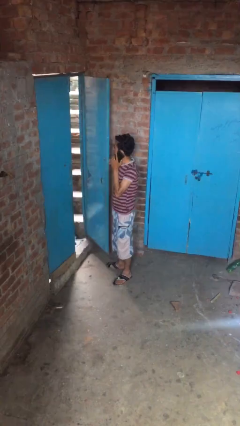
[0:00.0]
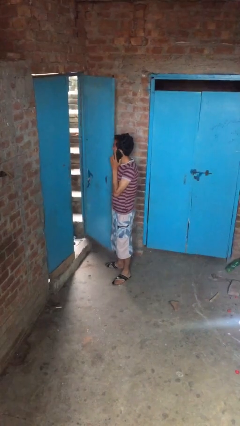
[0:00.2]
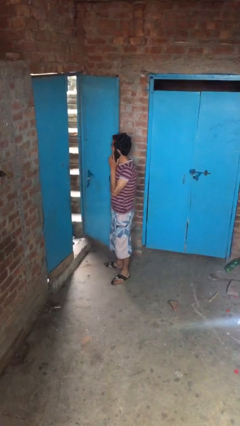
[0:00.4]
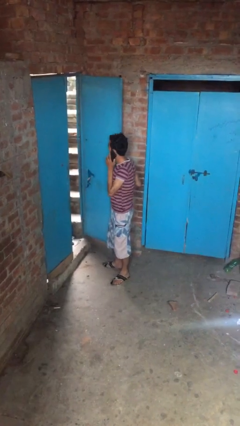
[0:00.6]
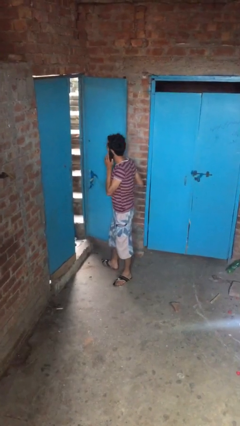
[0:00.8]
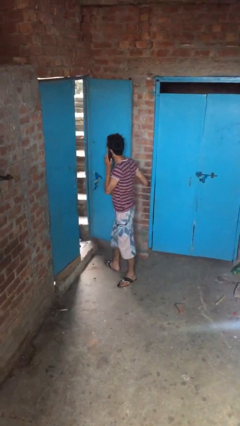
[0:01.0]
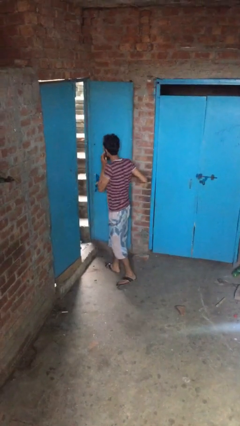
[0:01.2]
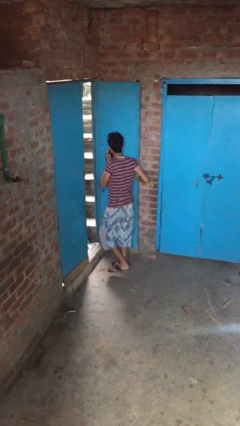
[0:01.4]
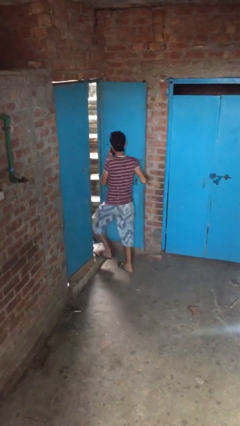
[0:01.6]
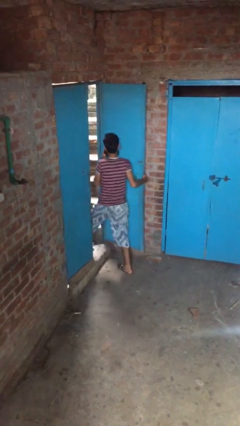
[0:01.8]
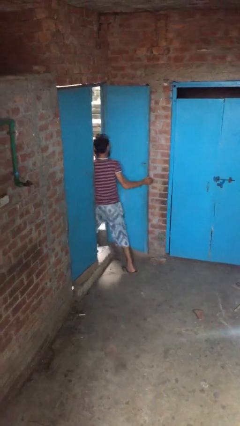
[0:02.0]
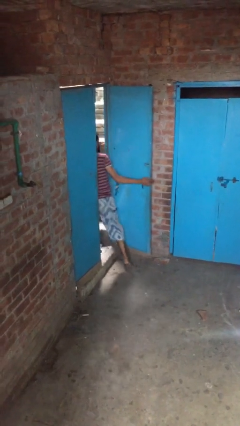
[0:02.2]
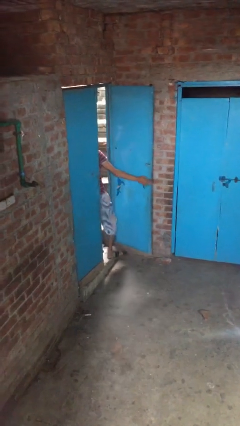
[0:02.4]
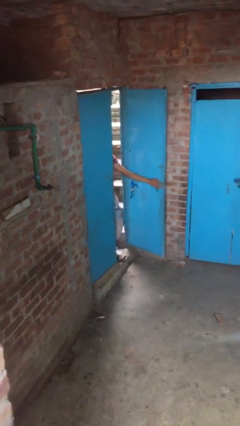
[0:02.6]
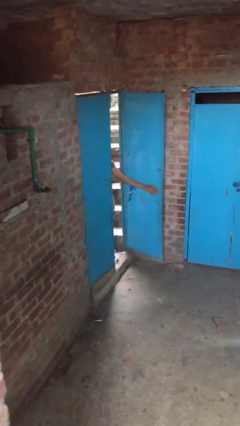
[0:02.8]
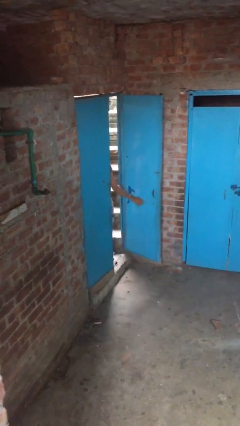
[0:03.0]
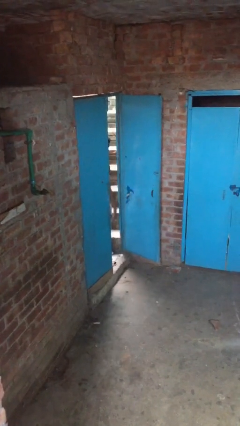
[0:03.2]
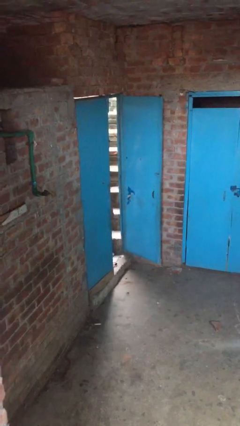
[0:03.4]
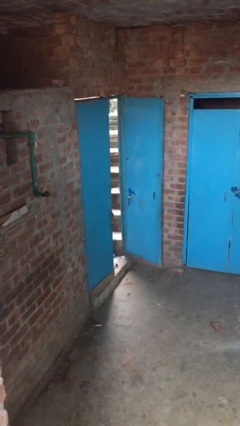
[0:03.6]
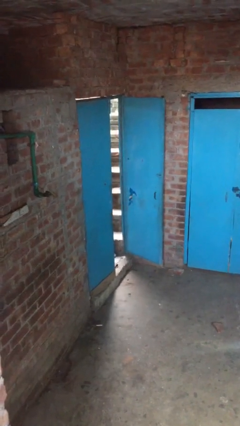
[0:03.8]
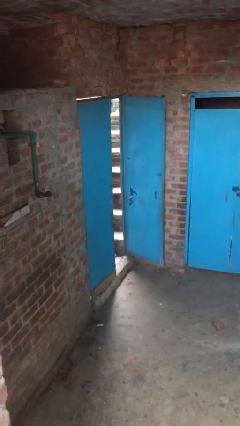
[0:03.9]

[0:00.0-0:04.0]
person exits scene through structure

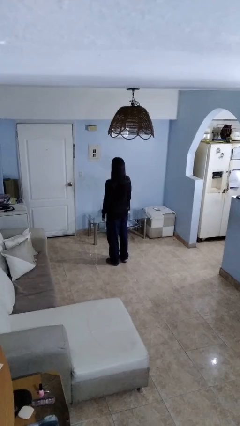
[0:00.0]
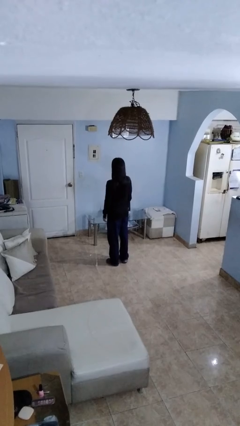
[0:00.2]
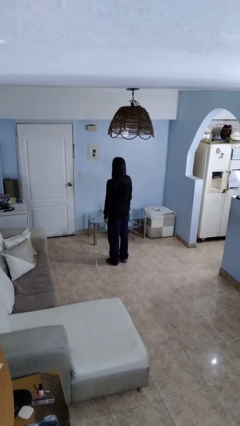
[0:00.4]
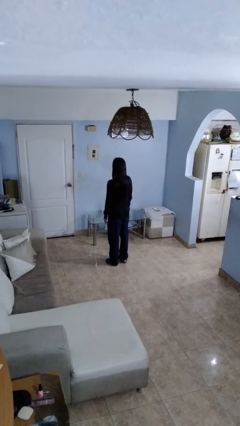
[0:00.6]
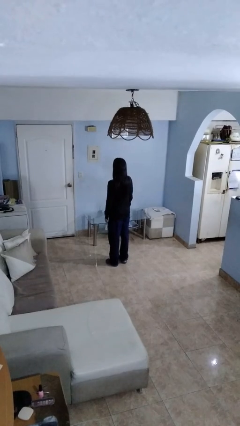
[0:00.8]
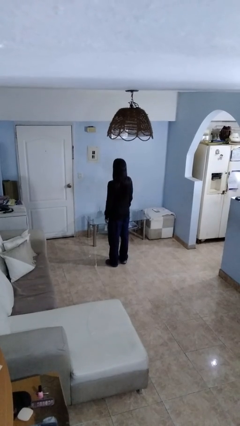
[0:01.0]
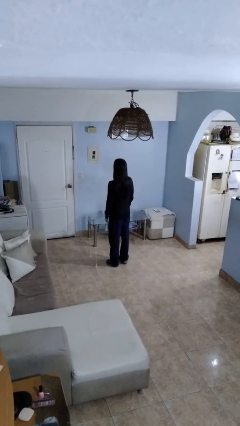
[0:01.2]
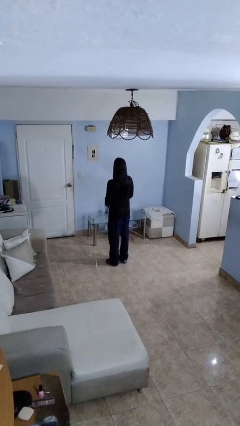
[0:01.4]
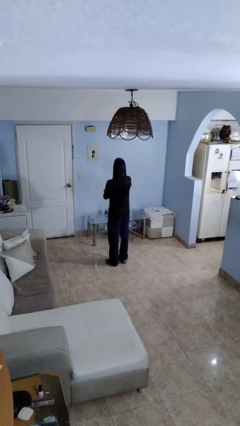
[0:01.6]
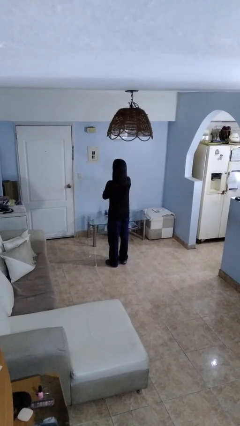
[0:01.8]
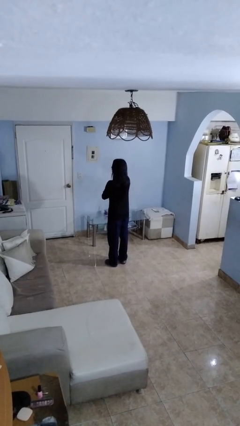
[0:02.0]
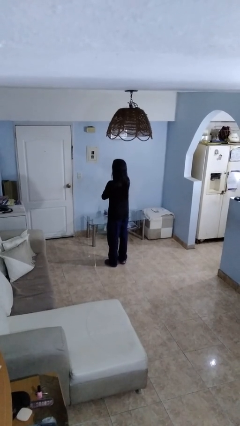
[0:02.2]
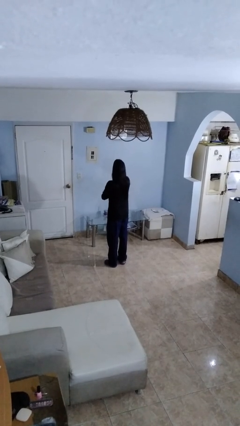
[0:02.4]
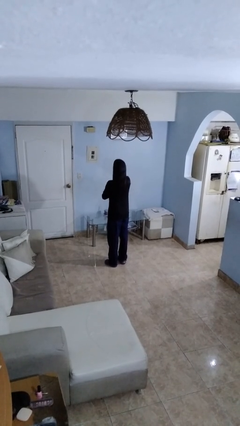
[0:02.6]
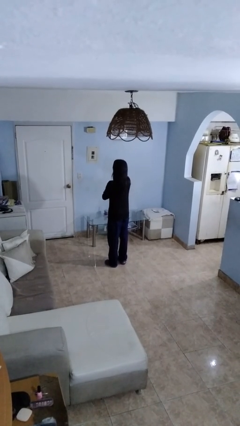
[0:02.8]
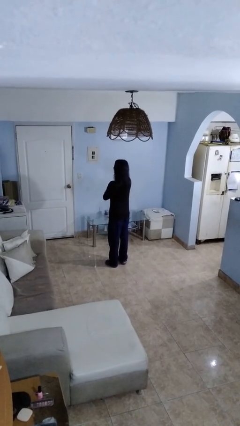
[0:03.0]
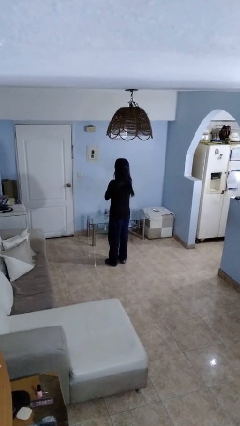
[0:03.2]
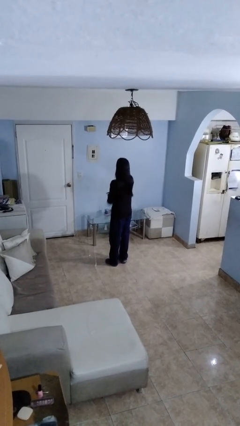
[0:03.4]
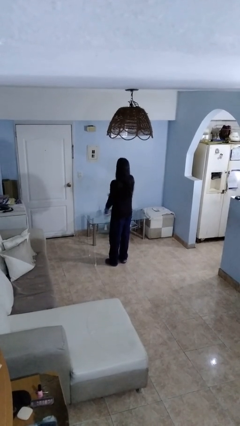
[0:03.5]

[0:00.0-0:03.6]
person shakes head

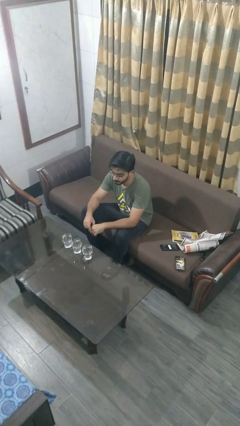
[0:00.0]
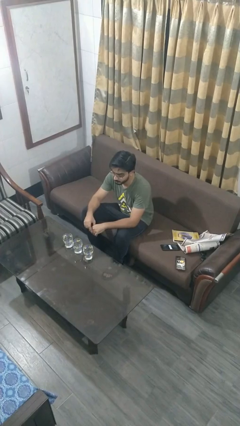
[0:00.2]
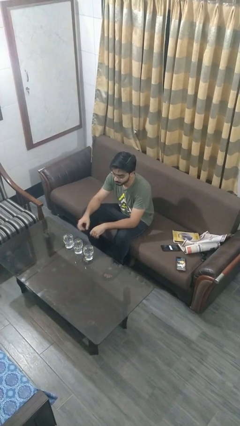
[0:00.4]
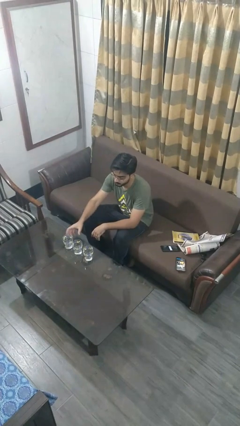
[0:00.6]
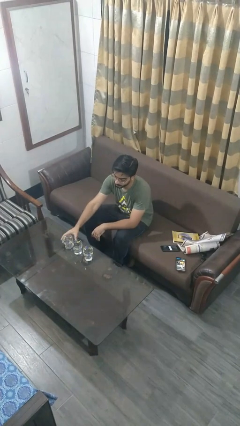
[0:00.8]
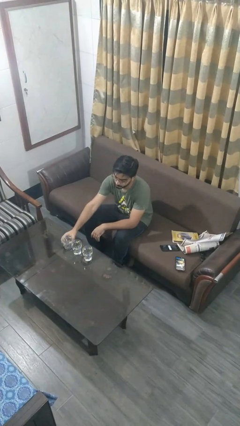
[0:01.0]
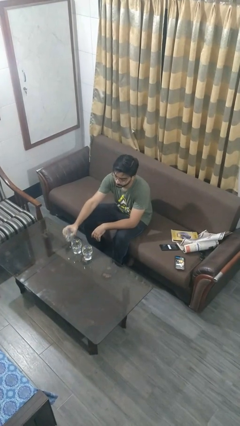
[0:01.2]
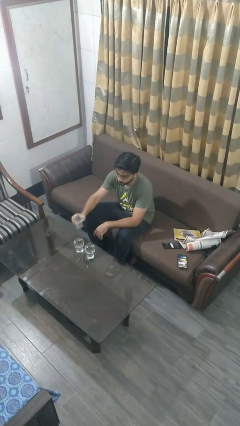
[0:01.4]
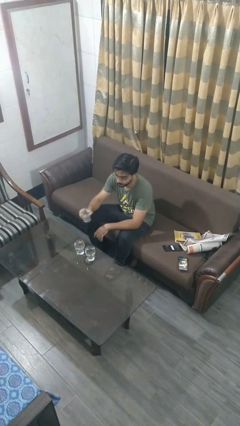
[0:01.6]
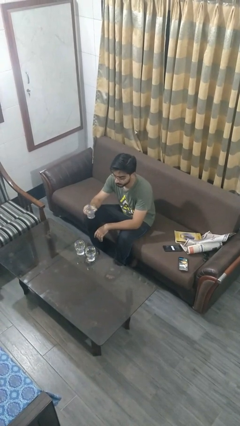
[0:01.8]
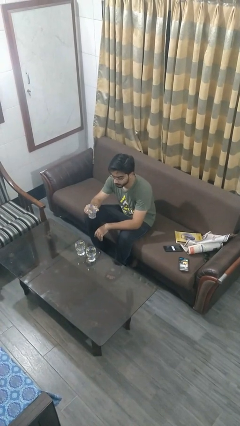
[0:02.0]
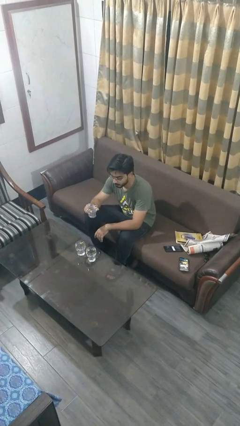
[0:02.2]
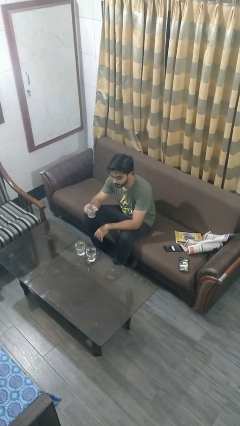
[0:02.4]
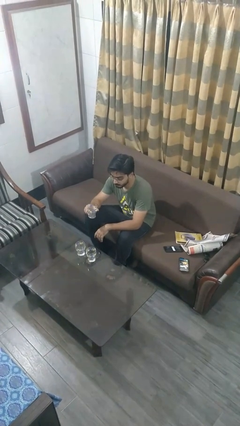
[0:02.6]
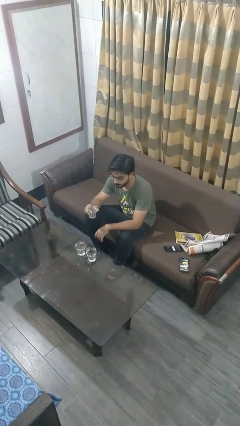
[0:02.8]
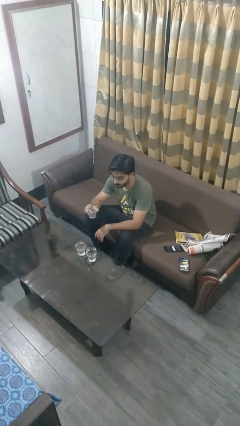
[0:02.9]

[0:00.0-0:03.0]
person picks up object from table

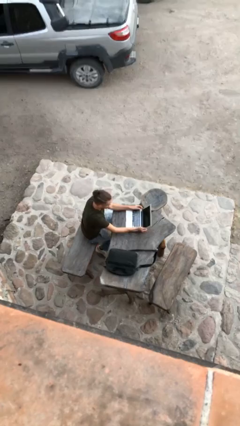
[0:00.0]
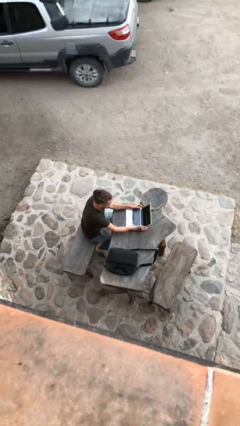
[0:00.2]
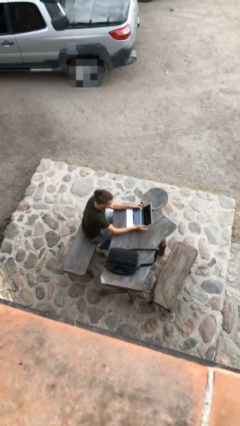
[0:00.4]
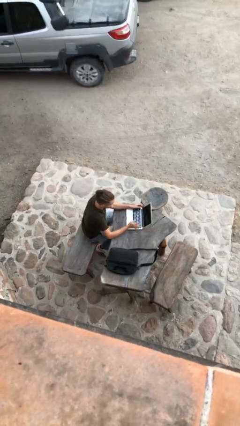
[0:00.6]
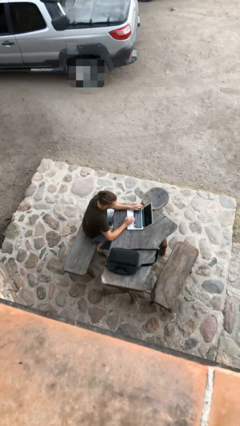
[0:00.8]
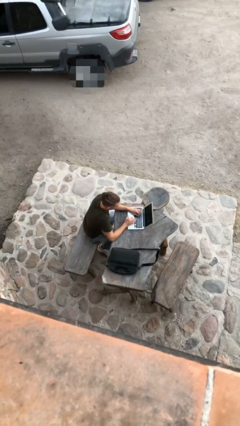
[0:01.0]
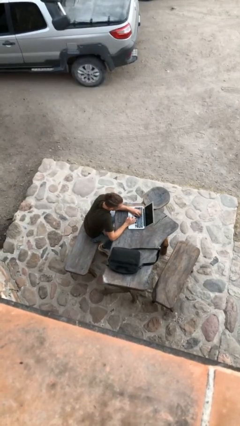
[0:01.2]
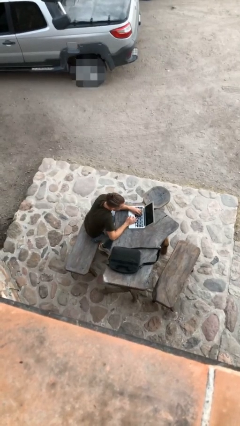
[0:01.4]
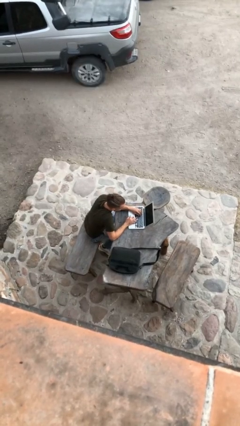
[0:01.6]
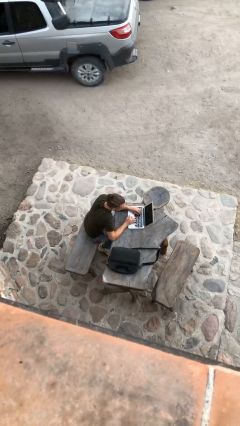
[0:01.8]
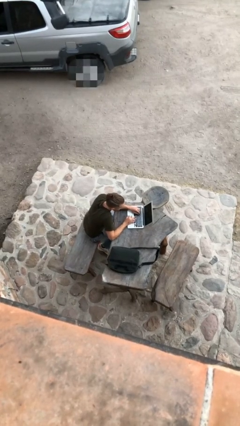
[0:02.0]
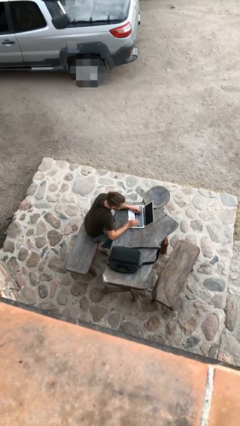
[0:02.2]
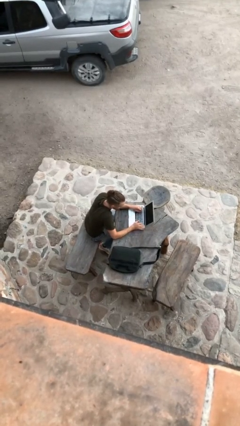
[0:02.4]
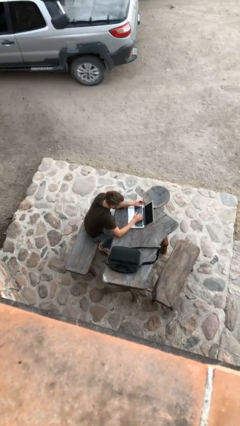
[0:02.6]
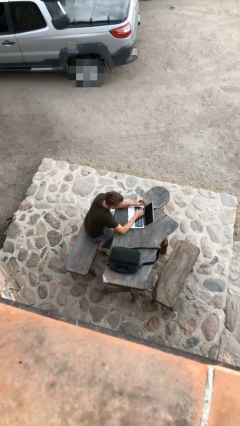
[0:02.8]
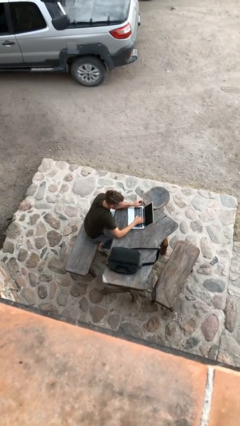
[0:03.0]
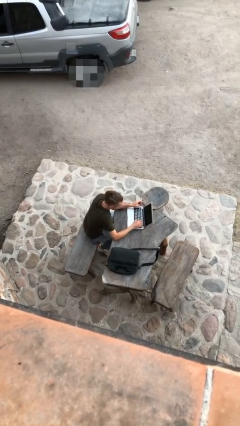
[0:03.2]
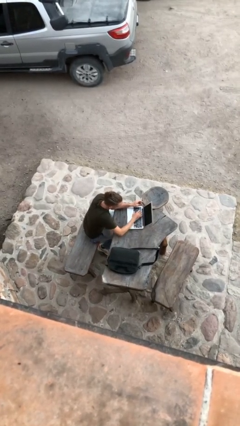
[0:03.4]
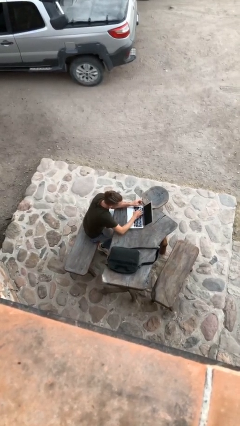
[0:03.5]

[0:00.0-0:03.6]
person interacts with laptop

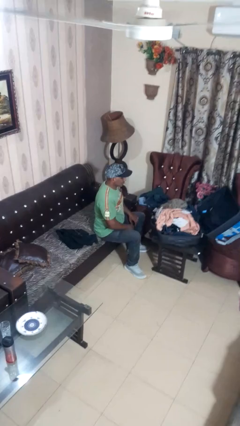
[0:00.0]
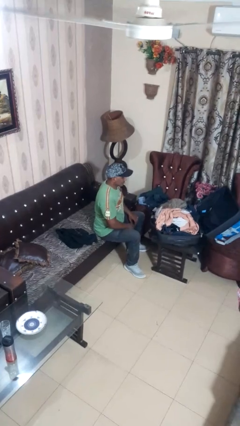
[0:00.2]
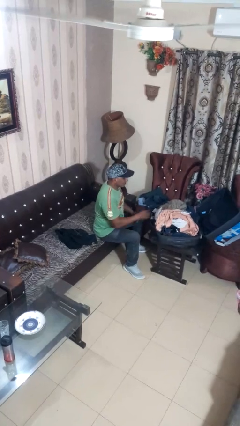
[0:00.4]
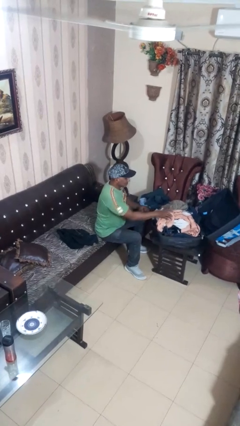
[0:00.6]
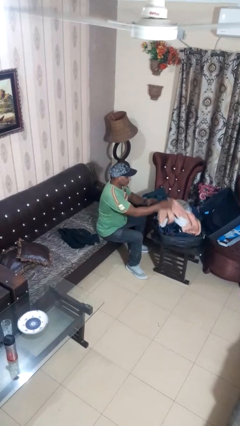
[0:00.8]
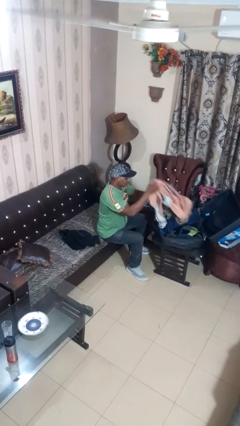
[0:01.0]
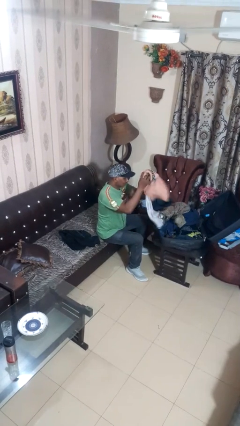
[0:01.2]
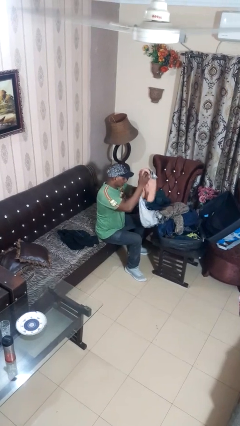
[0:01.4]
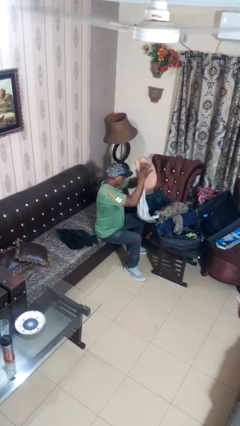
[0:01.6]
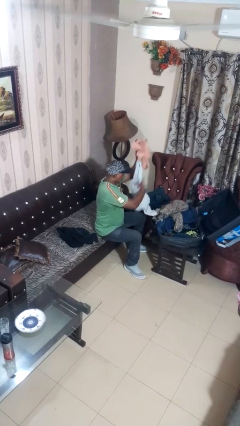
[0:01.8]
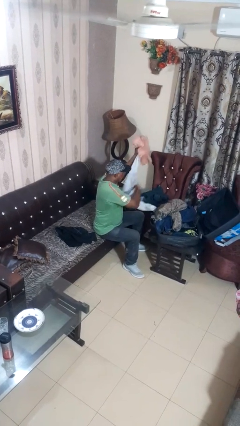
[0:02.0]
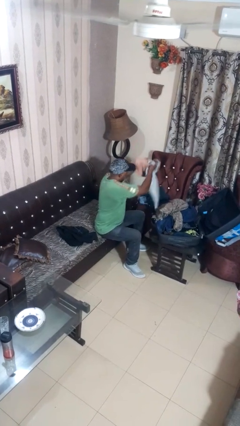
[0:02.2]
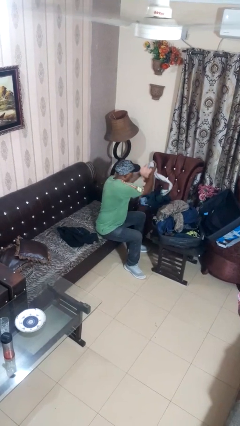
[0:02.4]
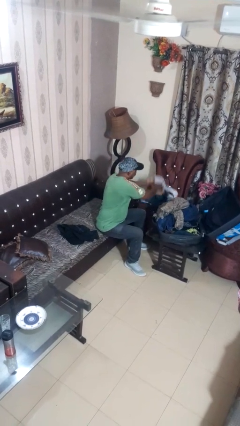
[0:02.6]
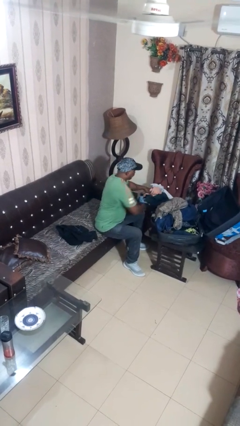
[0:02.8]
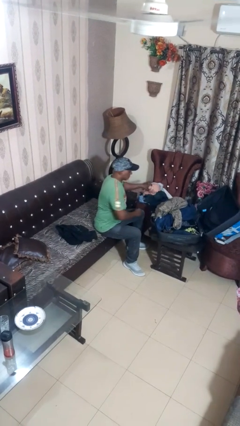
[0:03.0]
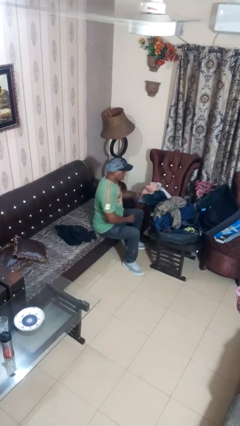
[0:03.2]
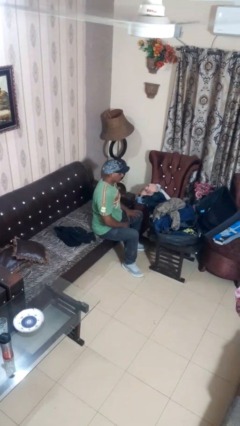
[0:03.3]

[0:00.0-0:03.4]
person unloads clothes from suitcase
